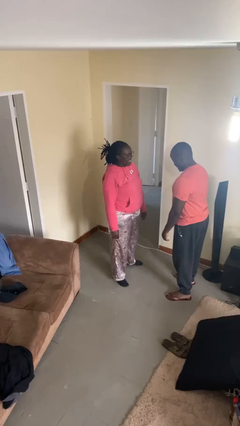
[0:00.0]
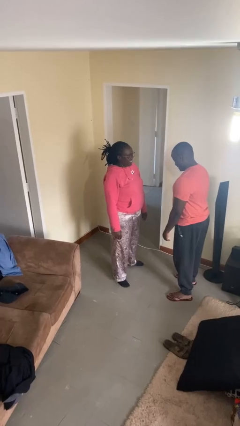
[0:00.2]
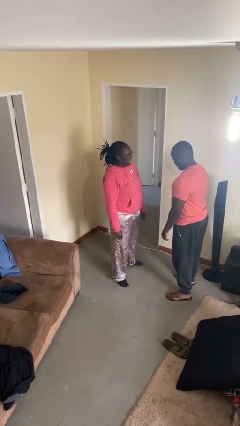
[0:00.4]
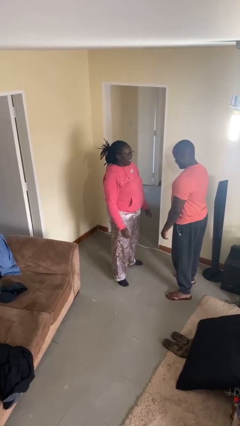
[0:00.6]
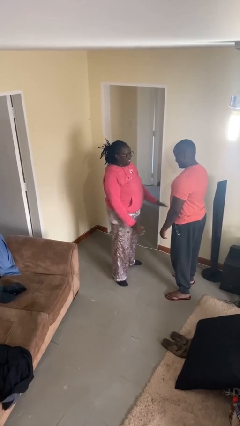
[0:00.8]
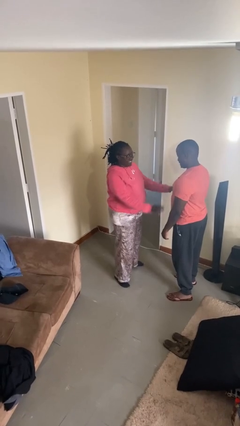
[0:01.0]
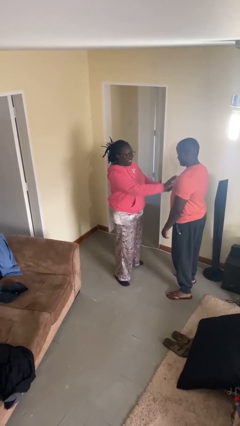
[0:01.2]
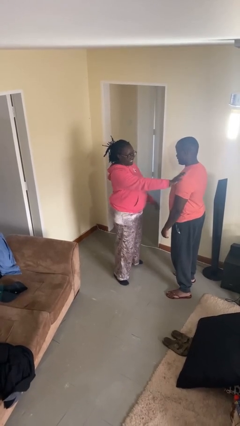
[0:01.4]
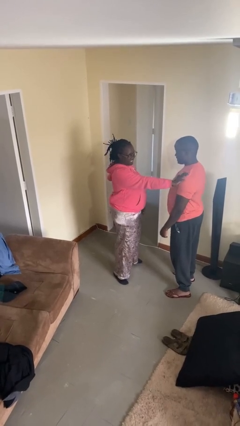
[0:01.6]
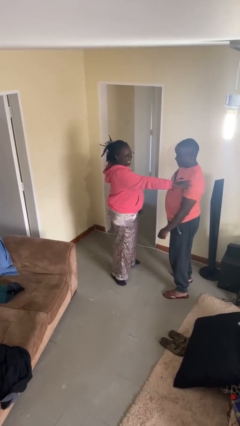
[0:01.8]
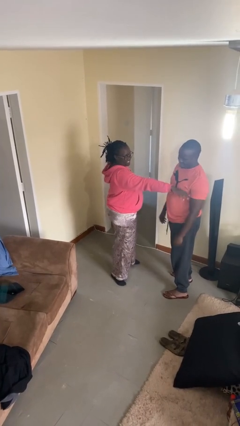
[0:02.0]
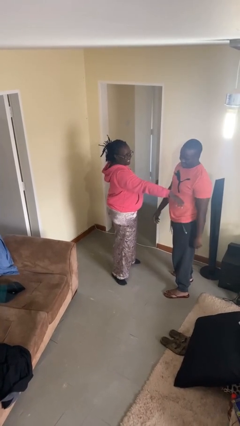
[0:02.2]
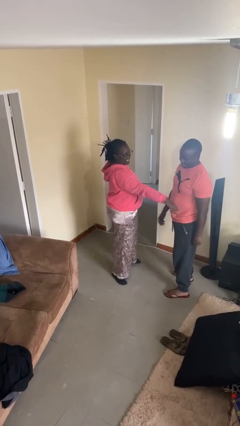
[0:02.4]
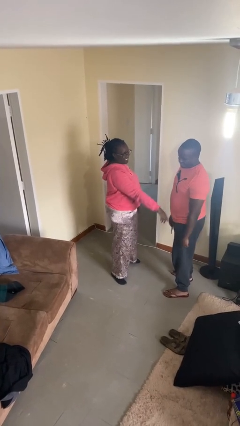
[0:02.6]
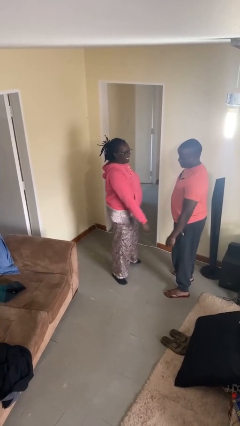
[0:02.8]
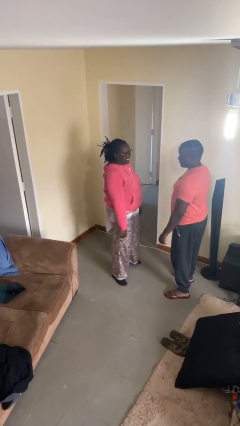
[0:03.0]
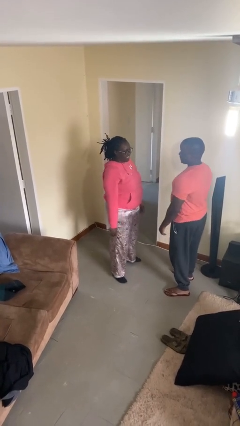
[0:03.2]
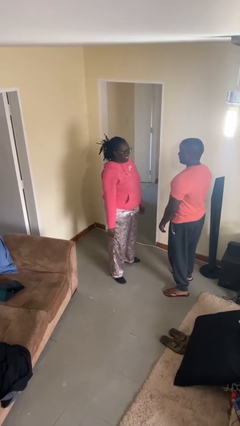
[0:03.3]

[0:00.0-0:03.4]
person shoves person

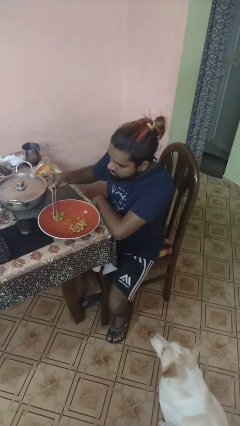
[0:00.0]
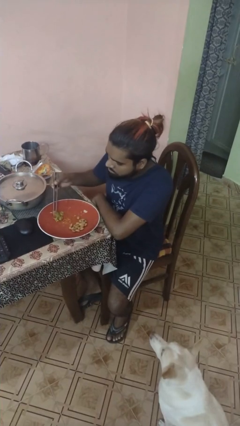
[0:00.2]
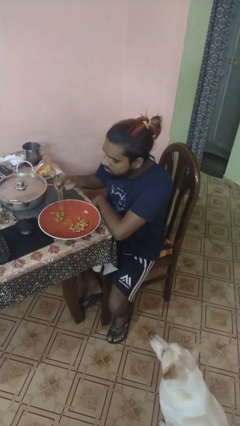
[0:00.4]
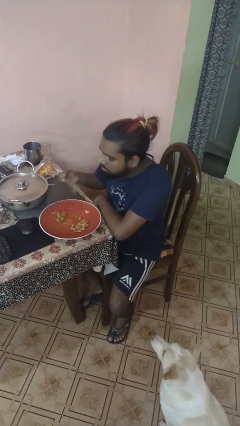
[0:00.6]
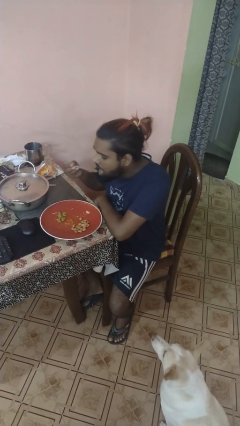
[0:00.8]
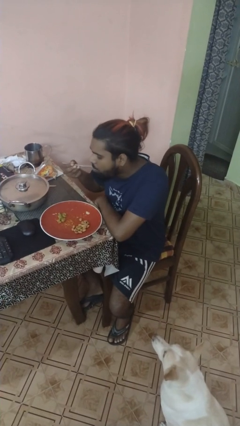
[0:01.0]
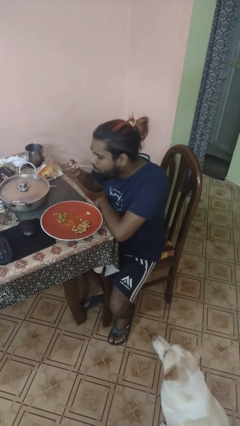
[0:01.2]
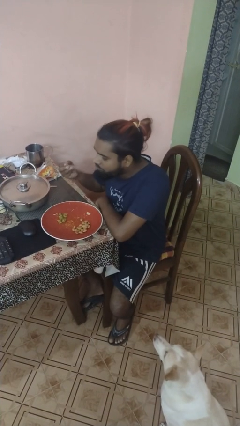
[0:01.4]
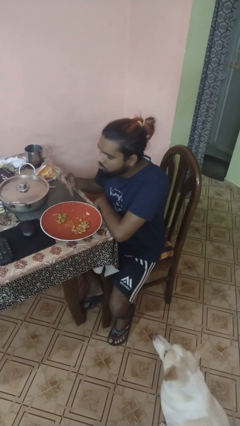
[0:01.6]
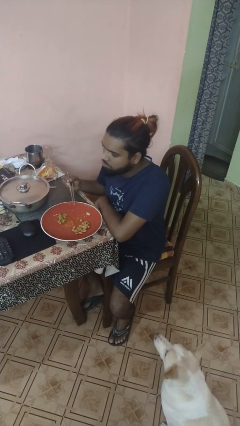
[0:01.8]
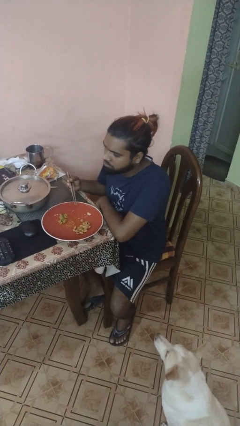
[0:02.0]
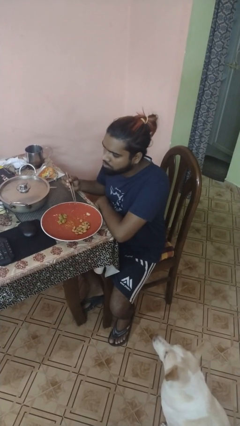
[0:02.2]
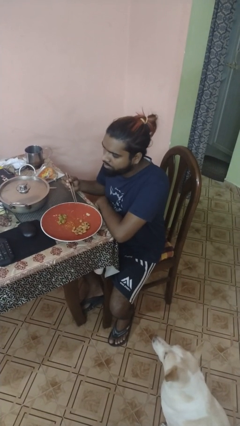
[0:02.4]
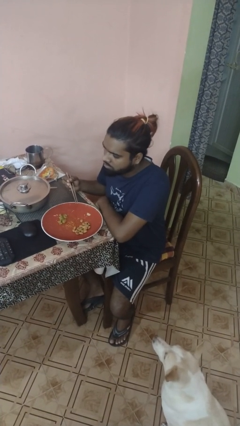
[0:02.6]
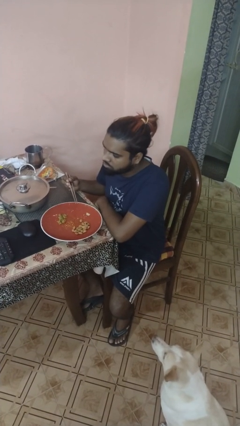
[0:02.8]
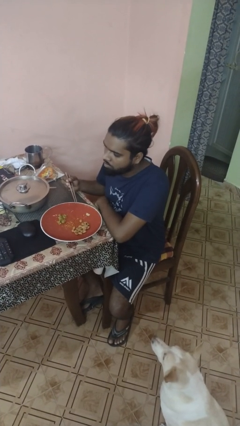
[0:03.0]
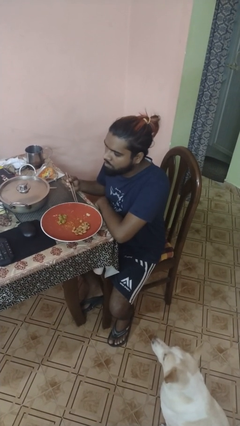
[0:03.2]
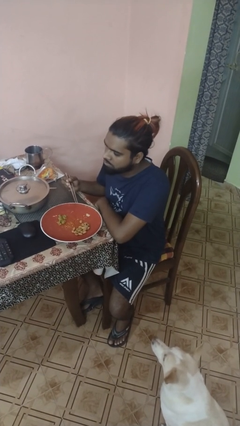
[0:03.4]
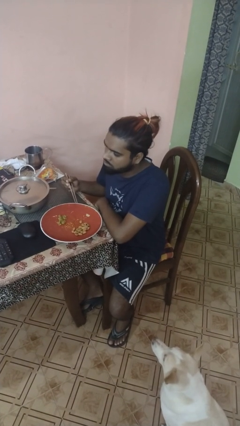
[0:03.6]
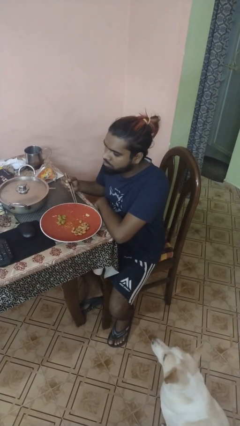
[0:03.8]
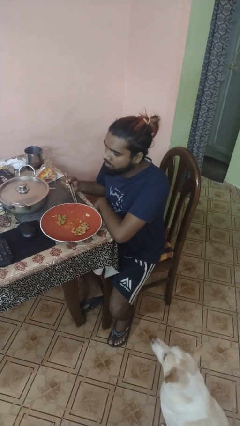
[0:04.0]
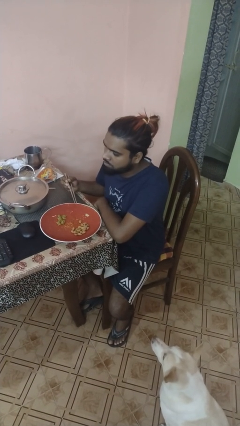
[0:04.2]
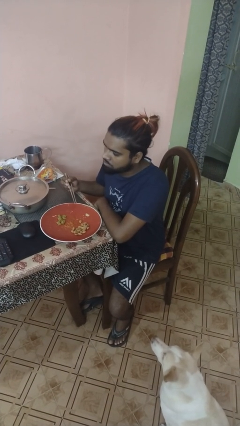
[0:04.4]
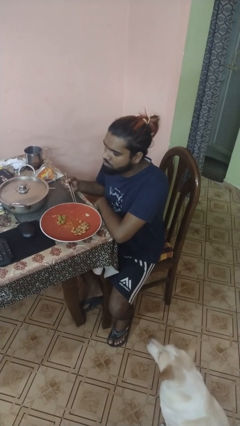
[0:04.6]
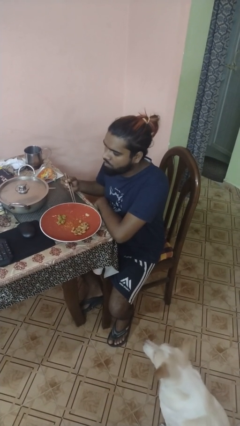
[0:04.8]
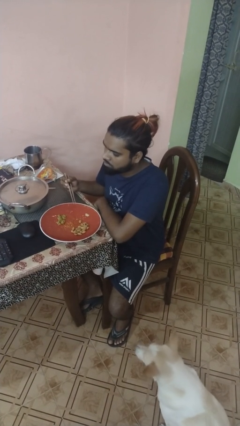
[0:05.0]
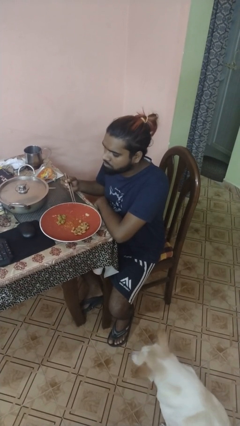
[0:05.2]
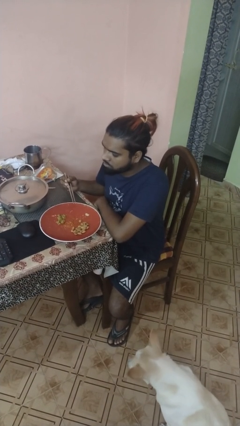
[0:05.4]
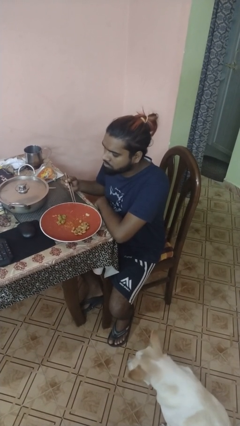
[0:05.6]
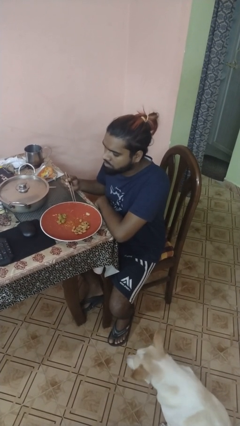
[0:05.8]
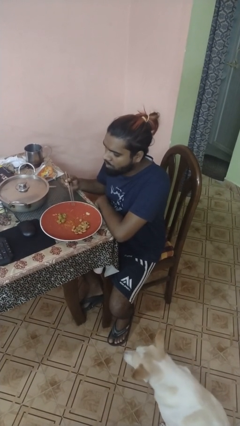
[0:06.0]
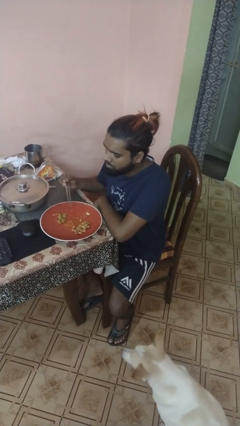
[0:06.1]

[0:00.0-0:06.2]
person eats with utensil

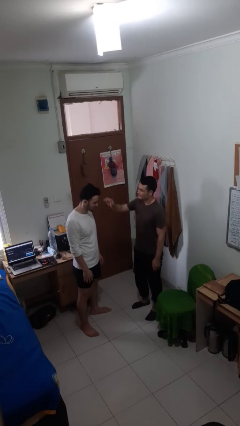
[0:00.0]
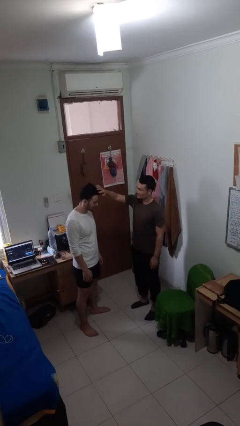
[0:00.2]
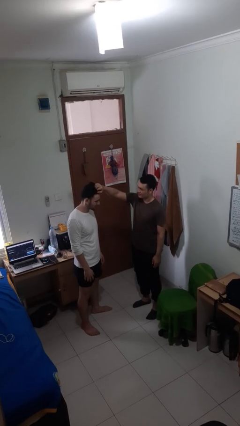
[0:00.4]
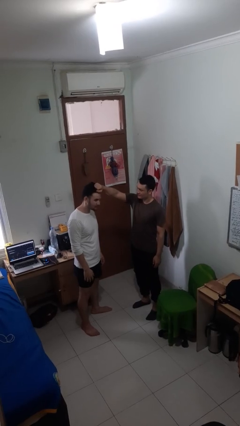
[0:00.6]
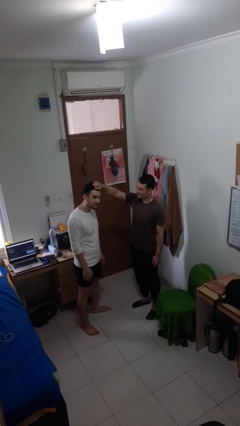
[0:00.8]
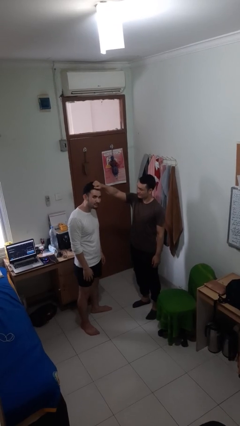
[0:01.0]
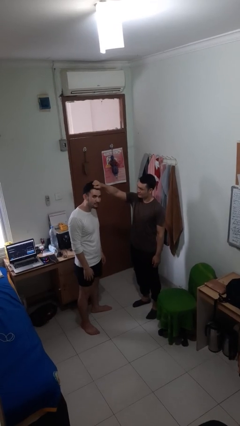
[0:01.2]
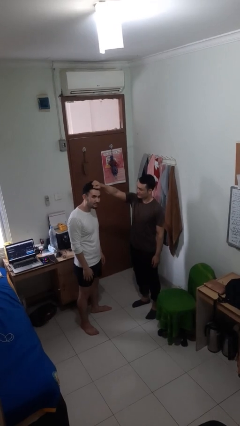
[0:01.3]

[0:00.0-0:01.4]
person grabs person by hair

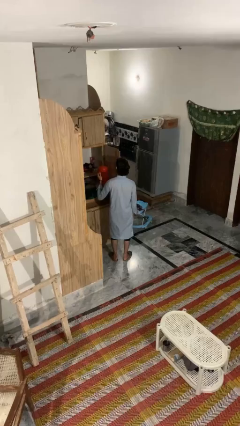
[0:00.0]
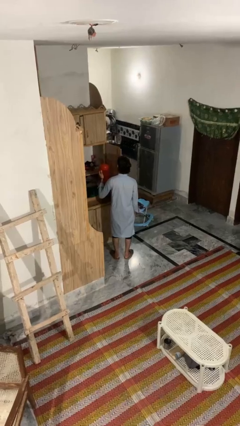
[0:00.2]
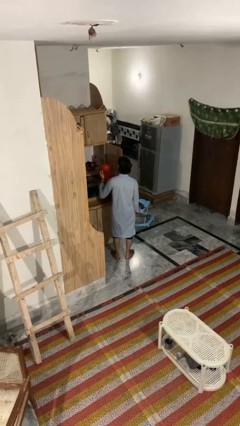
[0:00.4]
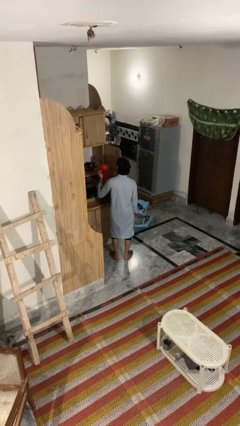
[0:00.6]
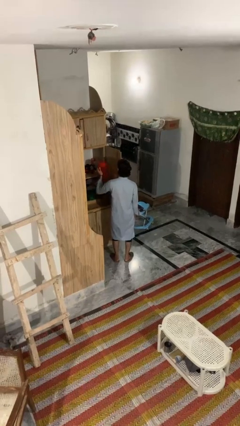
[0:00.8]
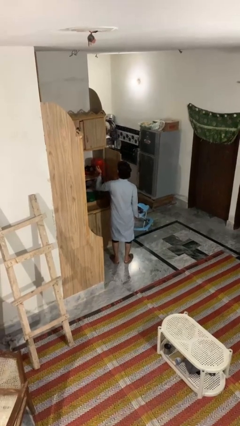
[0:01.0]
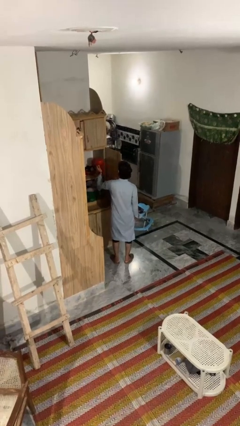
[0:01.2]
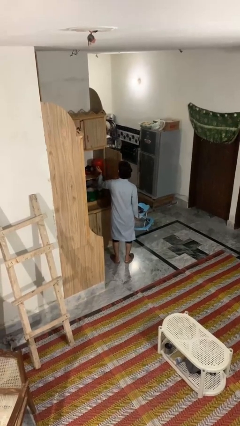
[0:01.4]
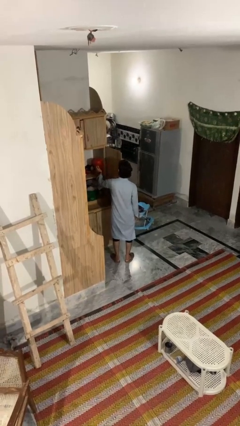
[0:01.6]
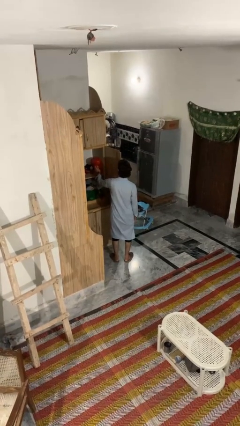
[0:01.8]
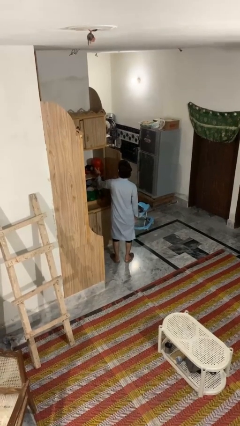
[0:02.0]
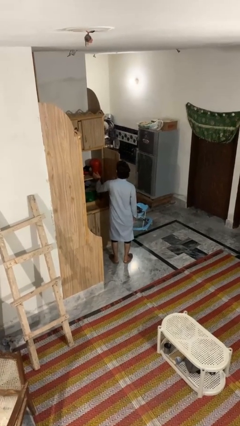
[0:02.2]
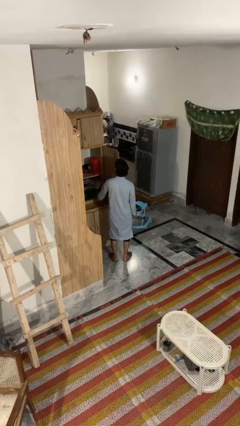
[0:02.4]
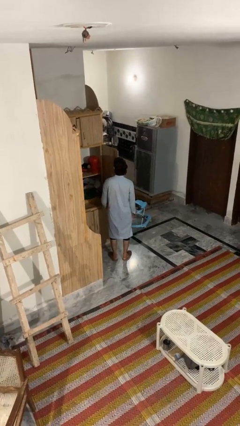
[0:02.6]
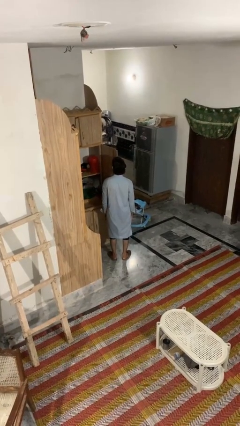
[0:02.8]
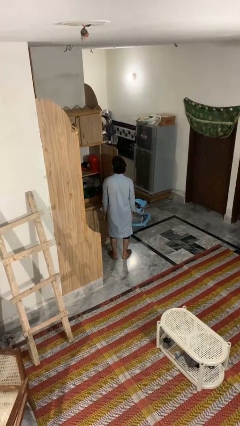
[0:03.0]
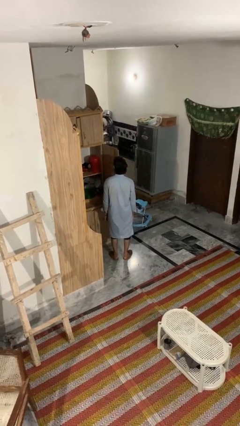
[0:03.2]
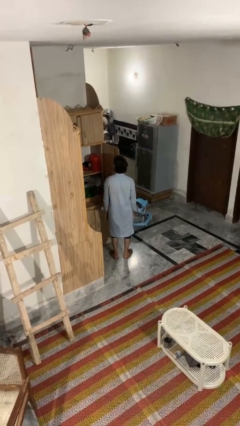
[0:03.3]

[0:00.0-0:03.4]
person puts down object into cabinet

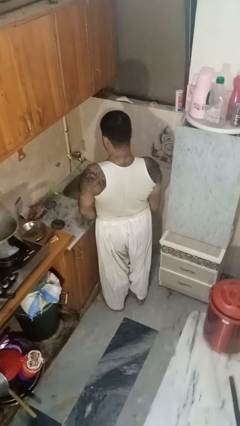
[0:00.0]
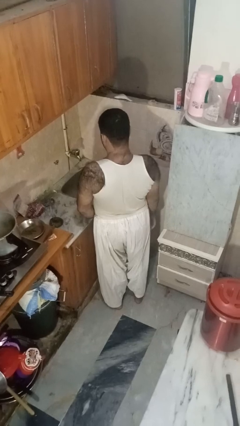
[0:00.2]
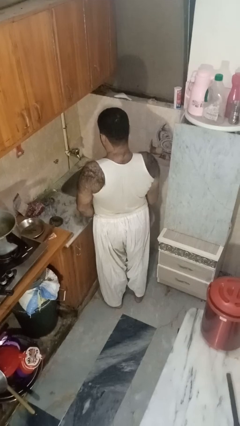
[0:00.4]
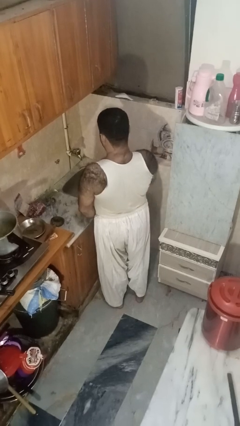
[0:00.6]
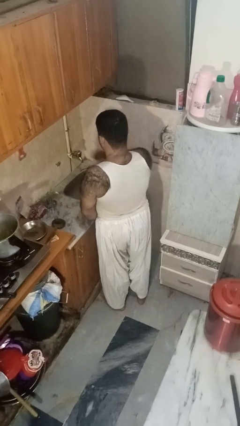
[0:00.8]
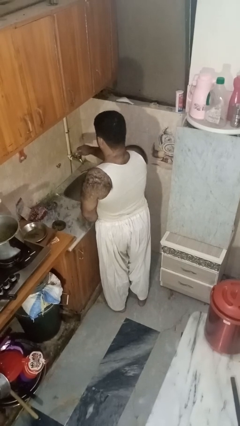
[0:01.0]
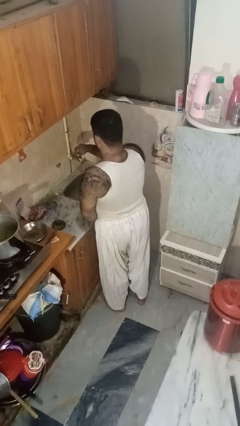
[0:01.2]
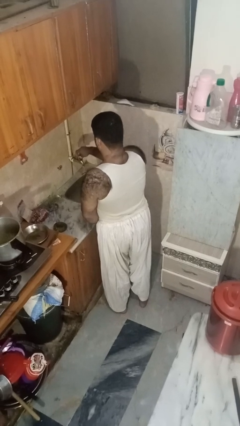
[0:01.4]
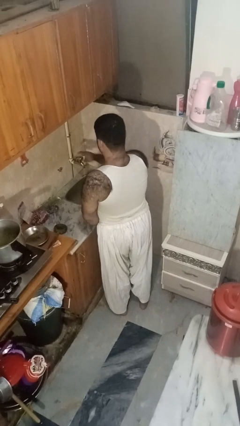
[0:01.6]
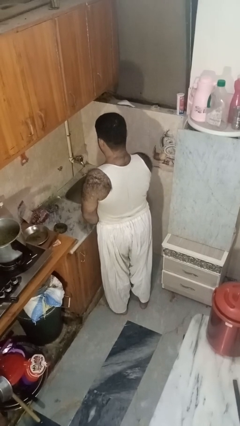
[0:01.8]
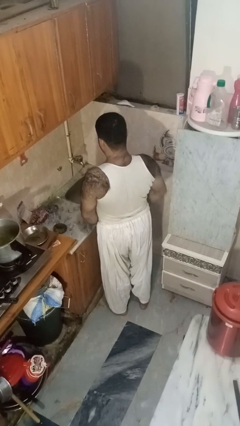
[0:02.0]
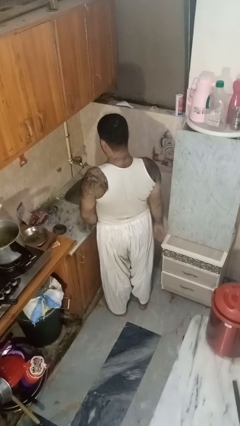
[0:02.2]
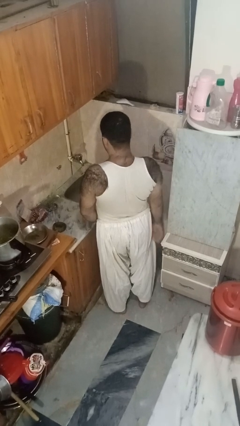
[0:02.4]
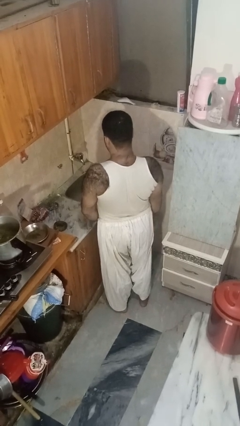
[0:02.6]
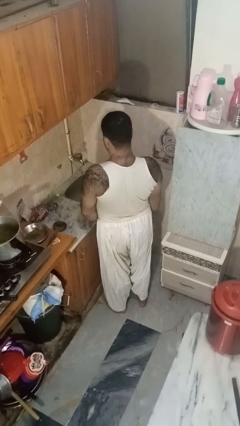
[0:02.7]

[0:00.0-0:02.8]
person turns on faucet
